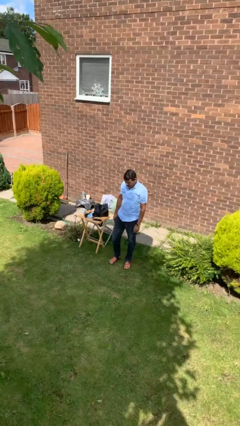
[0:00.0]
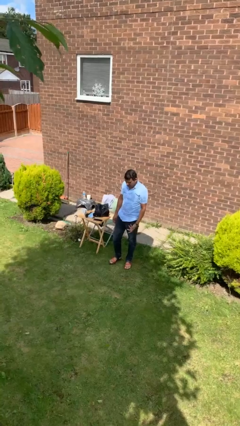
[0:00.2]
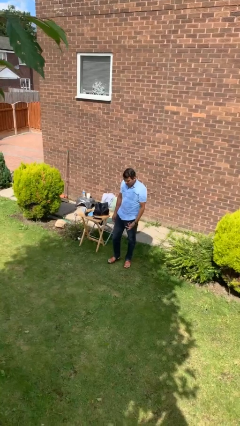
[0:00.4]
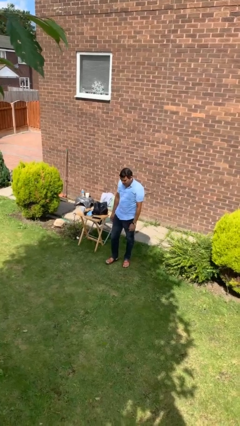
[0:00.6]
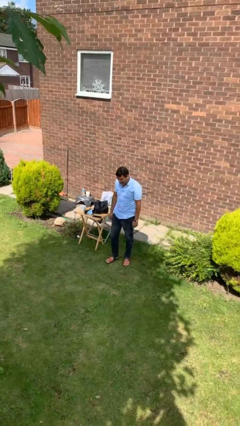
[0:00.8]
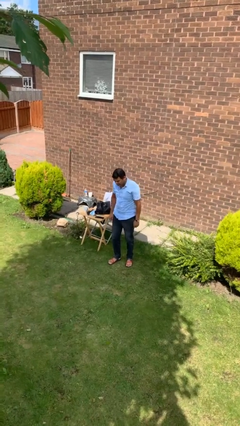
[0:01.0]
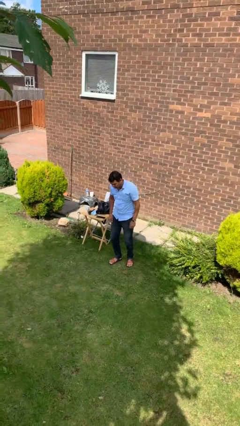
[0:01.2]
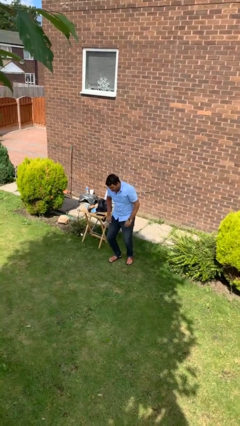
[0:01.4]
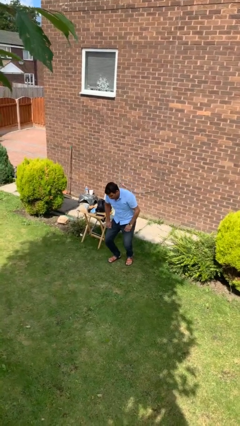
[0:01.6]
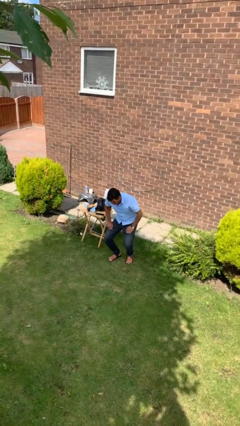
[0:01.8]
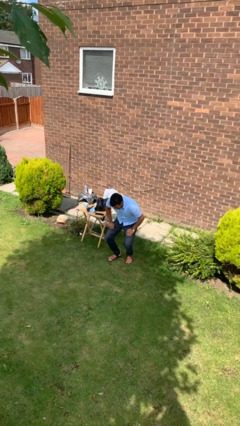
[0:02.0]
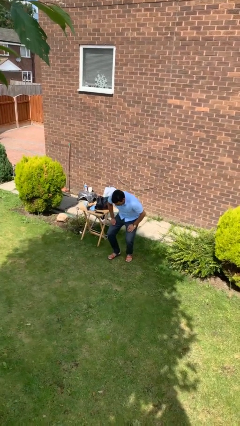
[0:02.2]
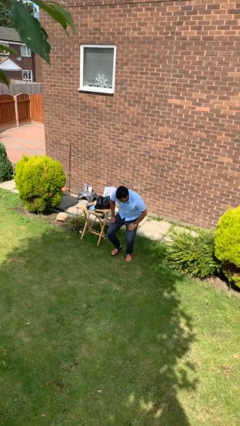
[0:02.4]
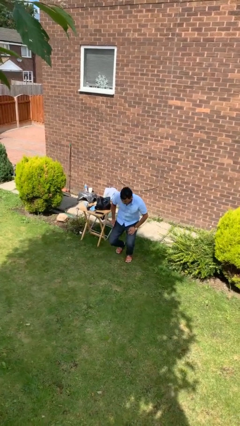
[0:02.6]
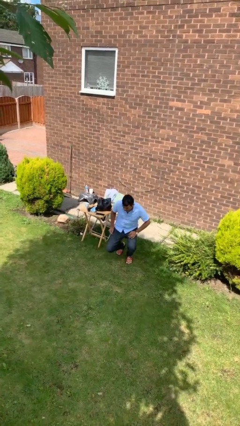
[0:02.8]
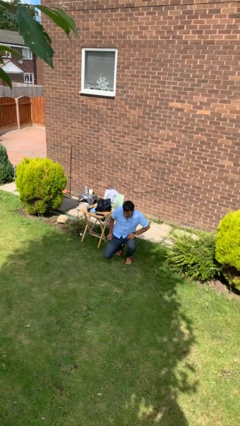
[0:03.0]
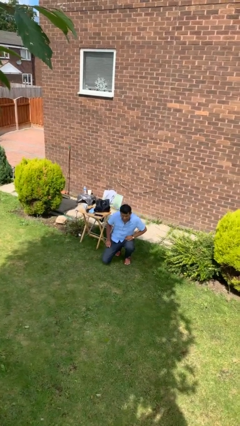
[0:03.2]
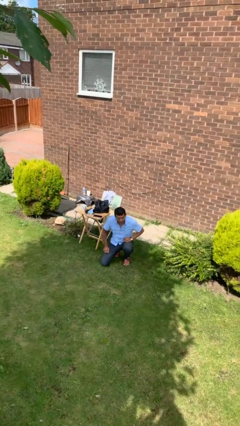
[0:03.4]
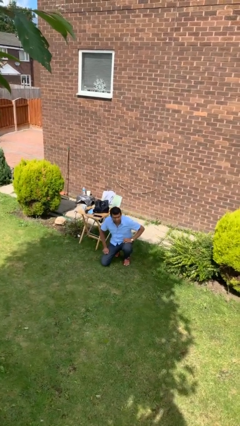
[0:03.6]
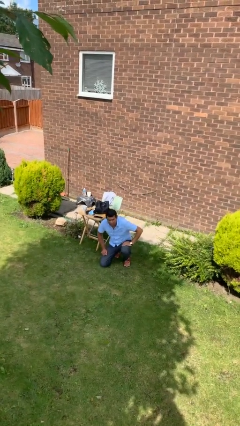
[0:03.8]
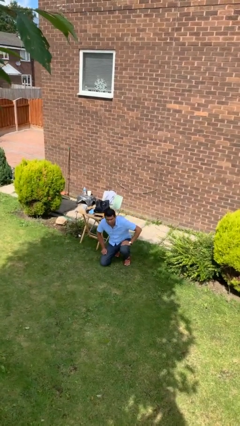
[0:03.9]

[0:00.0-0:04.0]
person kneels

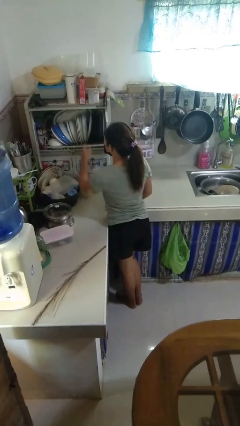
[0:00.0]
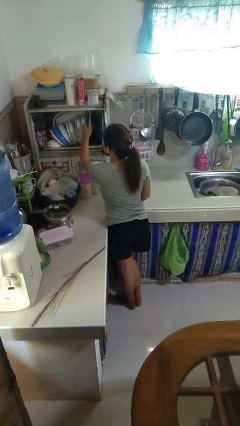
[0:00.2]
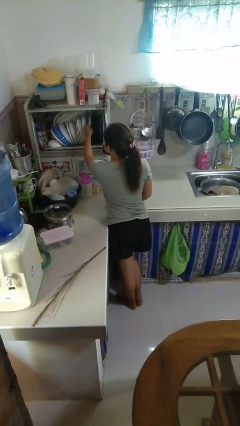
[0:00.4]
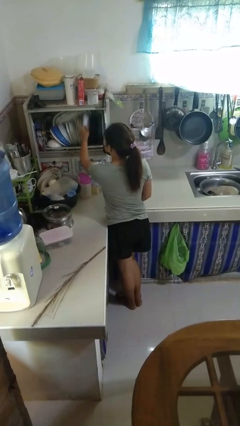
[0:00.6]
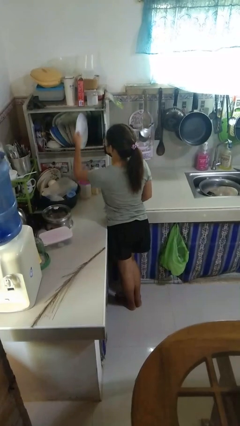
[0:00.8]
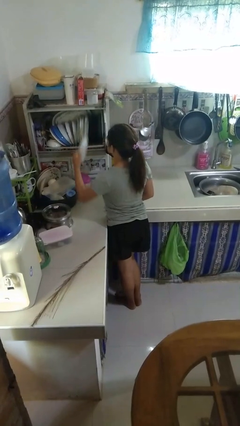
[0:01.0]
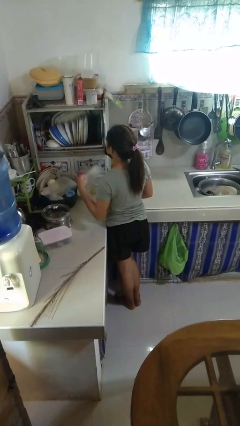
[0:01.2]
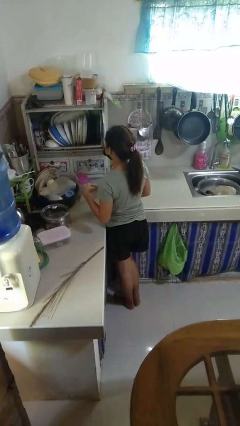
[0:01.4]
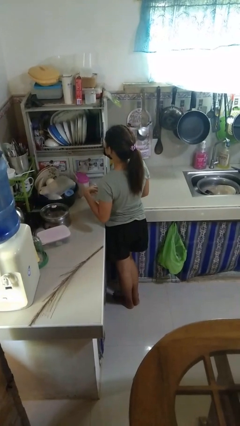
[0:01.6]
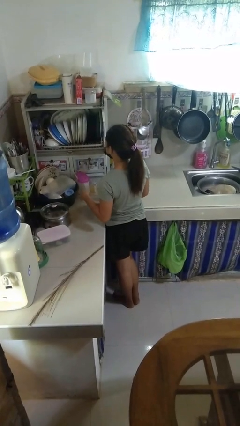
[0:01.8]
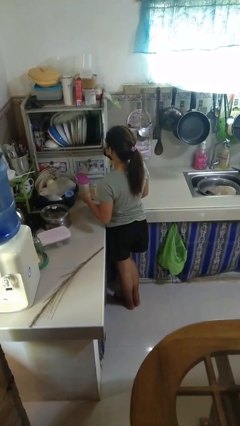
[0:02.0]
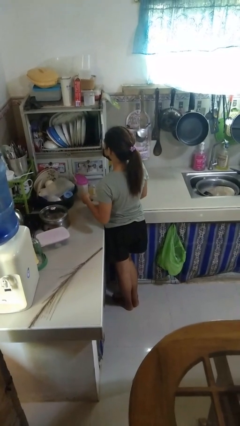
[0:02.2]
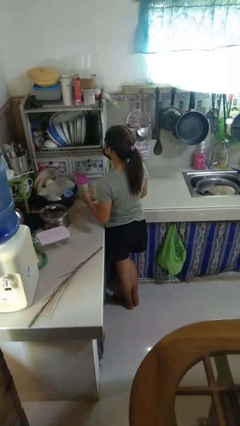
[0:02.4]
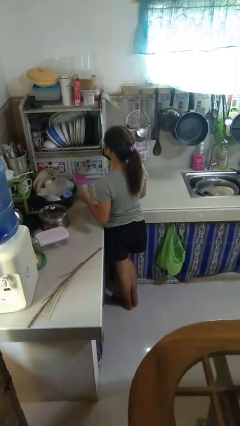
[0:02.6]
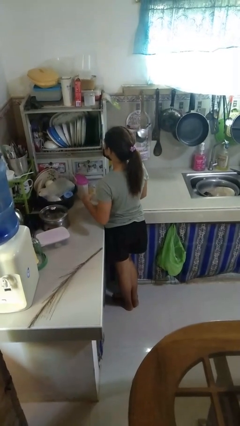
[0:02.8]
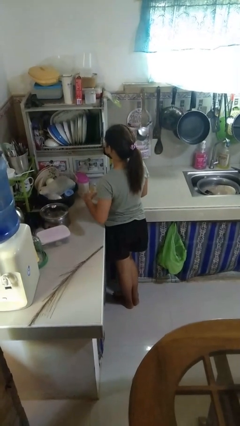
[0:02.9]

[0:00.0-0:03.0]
person takes object from kitchen drawer

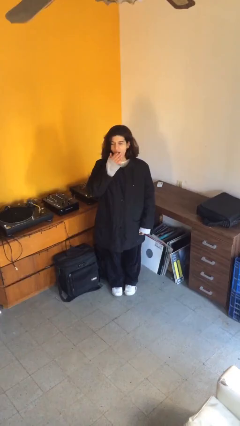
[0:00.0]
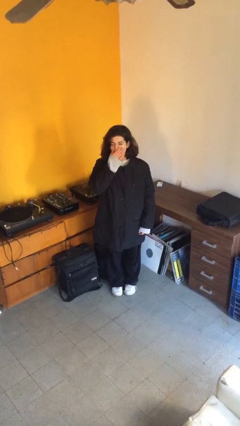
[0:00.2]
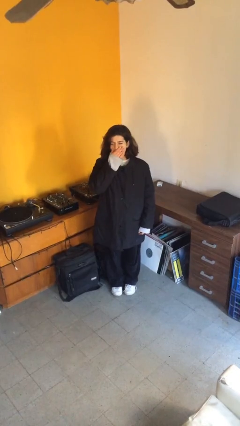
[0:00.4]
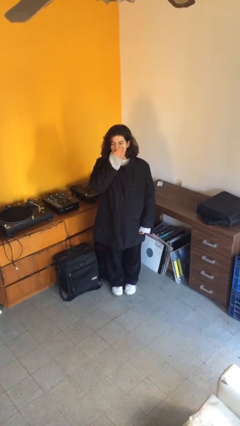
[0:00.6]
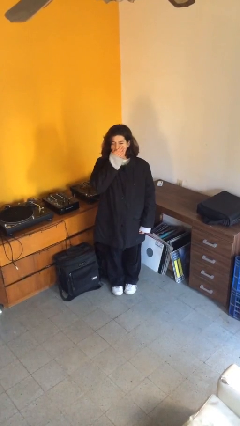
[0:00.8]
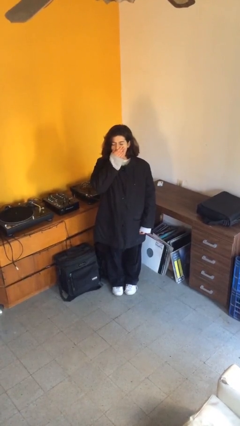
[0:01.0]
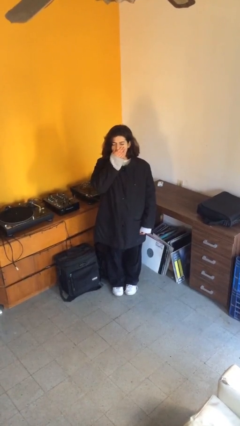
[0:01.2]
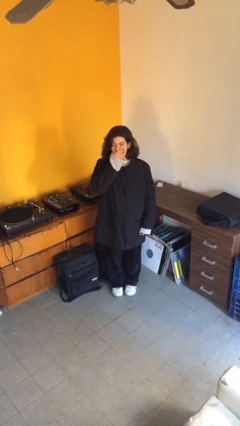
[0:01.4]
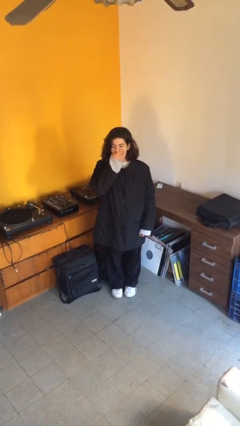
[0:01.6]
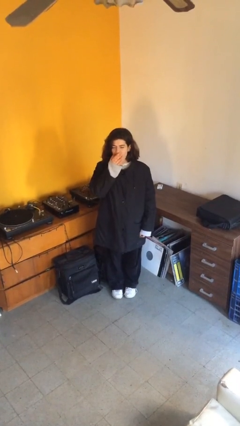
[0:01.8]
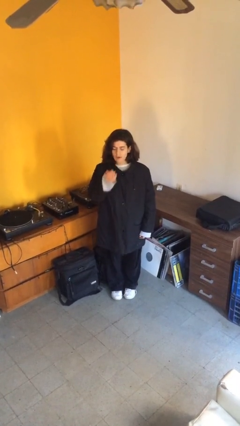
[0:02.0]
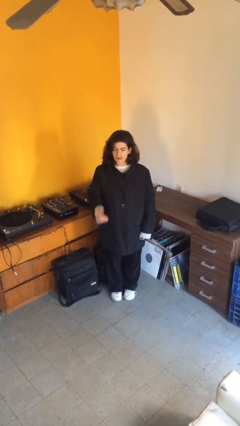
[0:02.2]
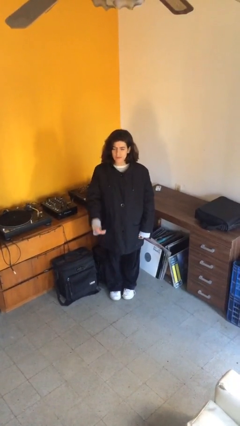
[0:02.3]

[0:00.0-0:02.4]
person yawns

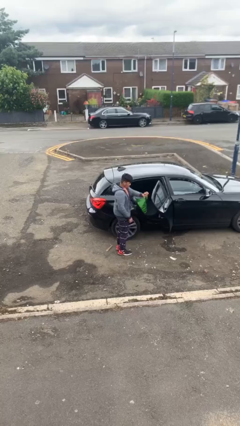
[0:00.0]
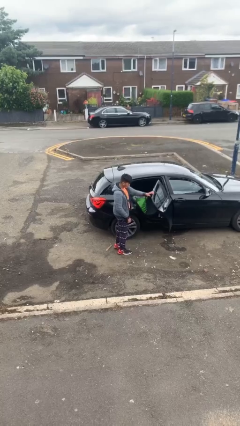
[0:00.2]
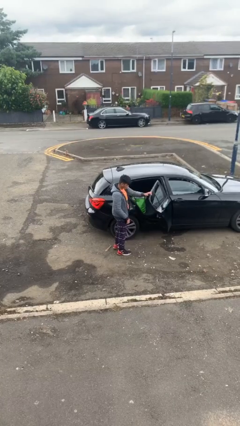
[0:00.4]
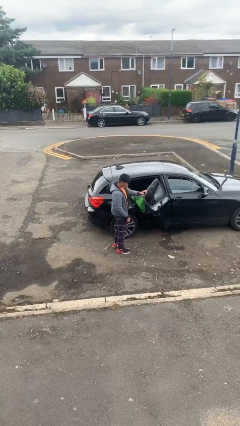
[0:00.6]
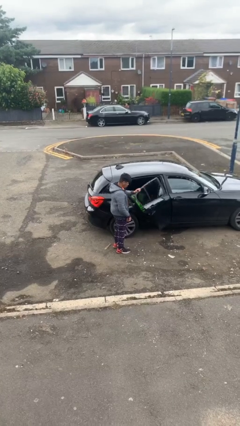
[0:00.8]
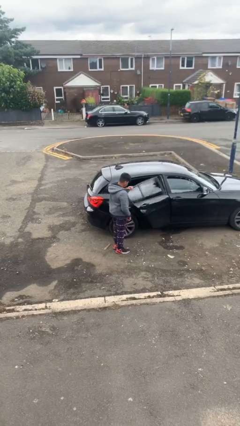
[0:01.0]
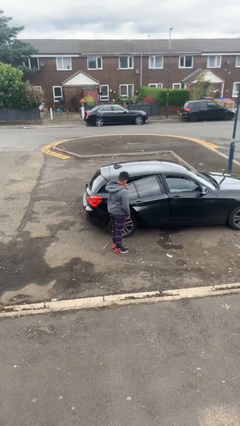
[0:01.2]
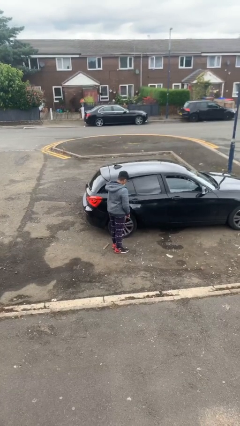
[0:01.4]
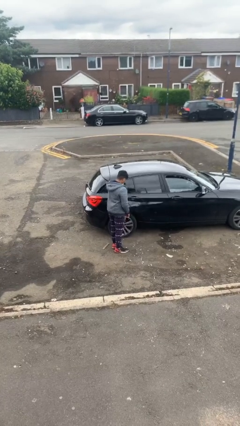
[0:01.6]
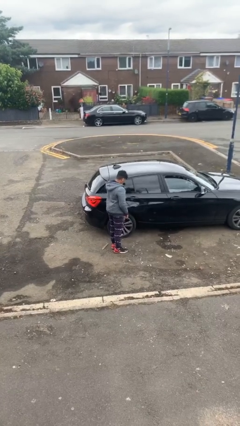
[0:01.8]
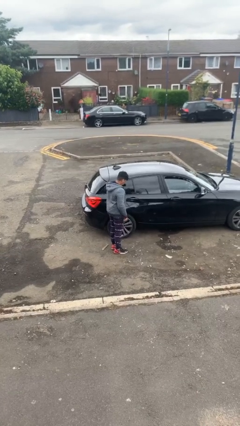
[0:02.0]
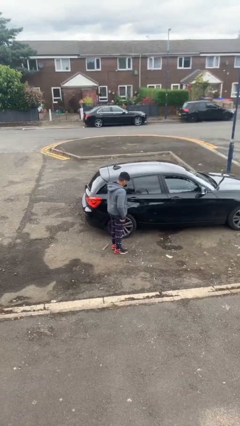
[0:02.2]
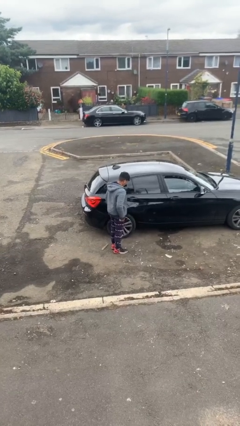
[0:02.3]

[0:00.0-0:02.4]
person closes car door

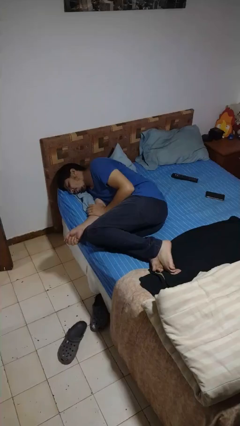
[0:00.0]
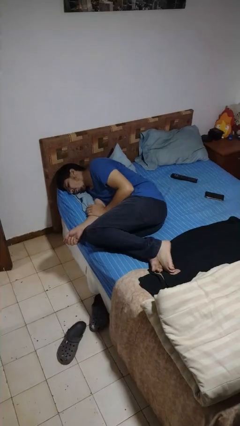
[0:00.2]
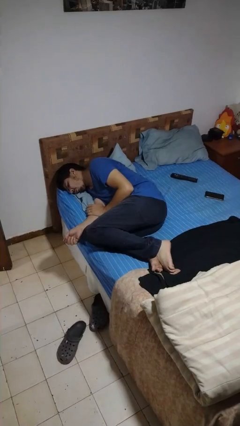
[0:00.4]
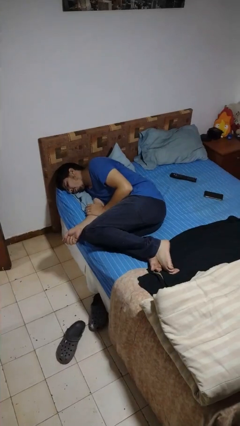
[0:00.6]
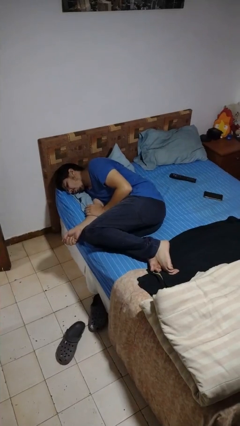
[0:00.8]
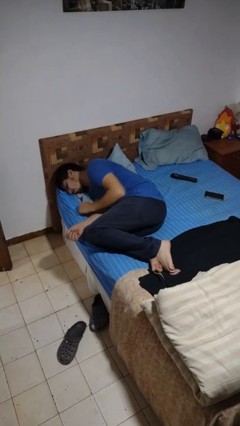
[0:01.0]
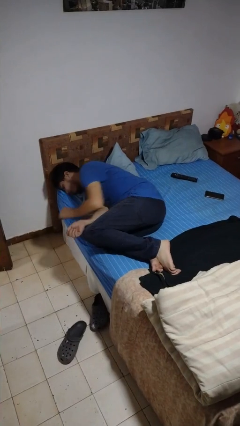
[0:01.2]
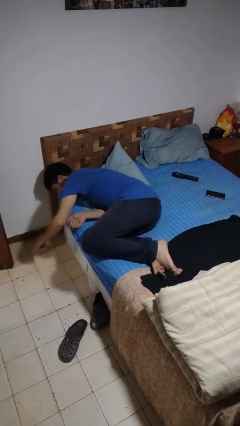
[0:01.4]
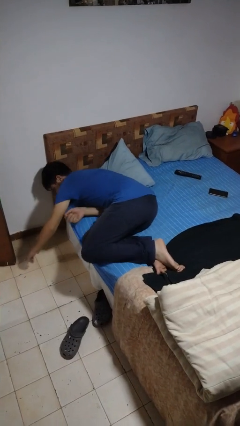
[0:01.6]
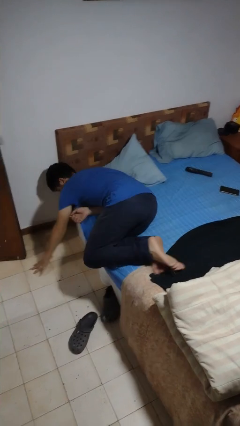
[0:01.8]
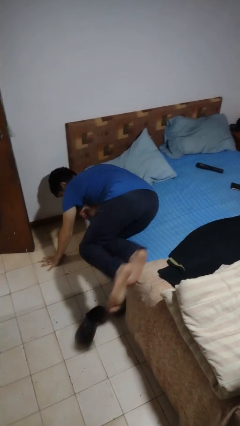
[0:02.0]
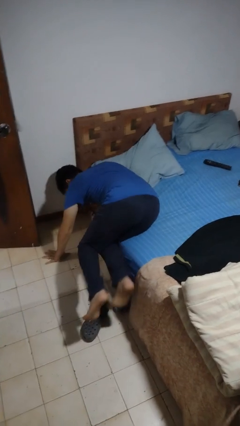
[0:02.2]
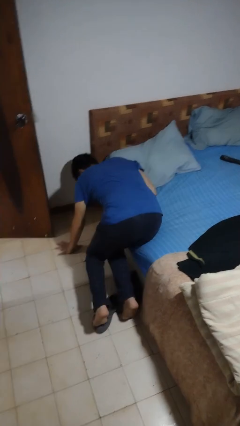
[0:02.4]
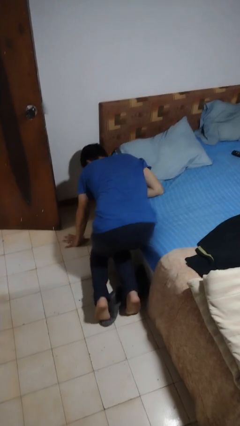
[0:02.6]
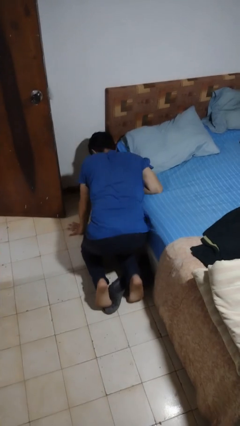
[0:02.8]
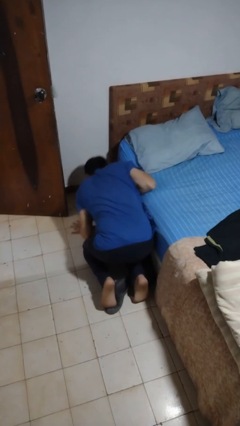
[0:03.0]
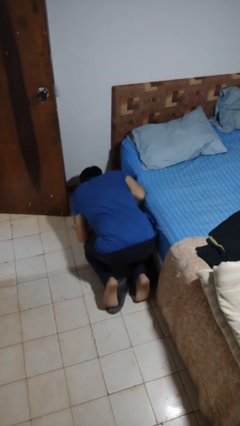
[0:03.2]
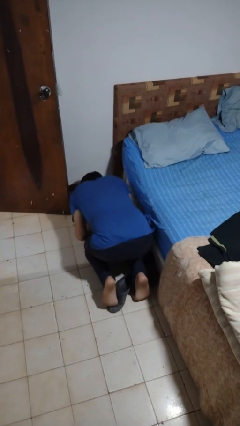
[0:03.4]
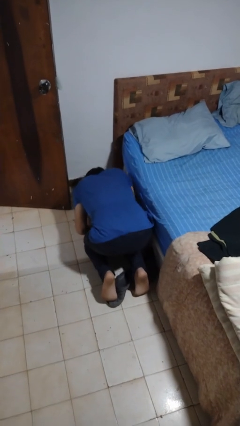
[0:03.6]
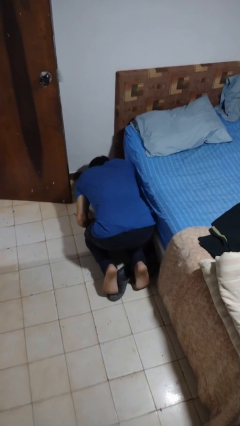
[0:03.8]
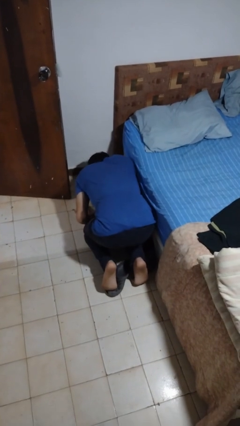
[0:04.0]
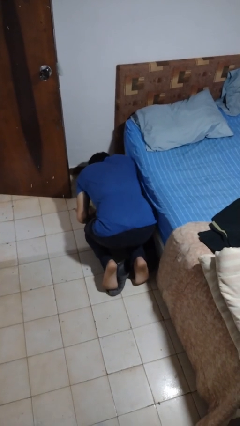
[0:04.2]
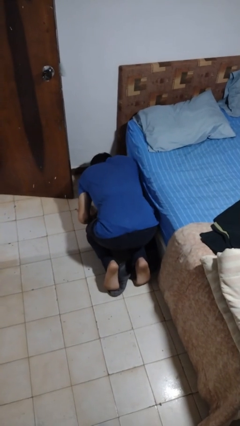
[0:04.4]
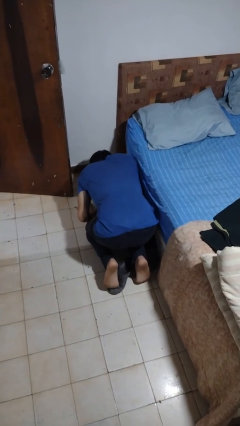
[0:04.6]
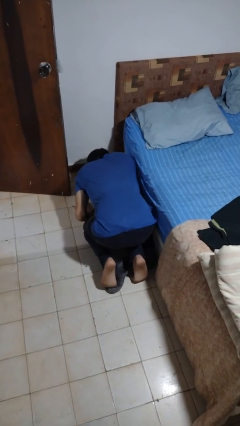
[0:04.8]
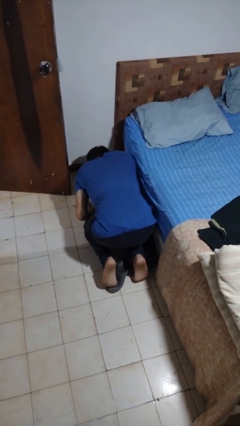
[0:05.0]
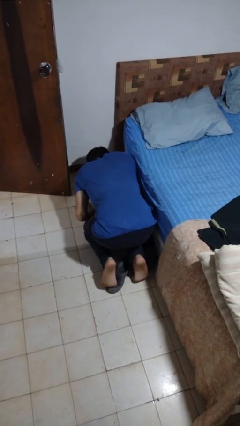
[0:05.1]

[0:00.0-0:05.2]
person falls from bed

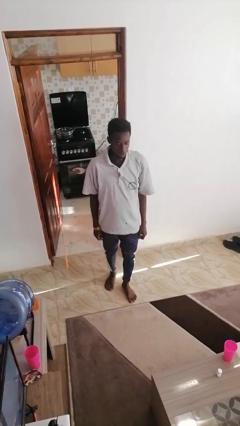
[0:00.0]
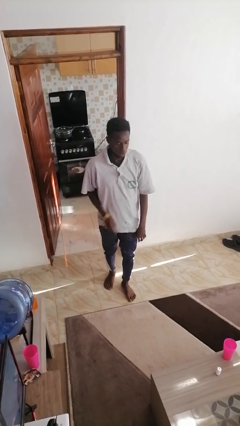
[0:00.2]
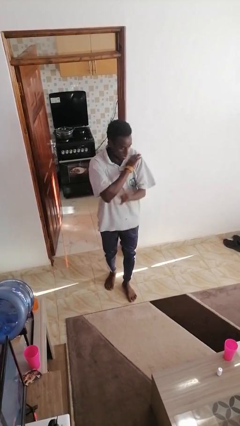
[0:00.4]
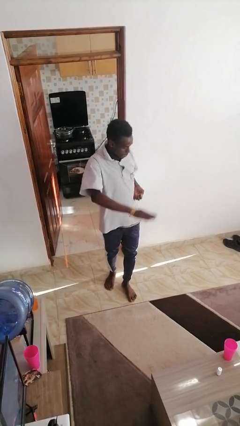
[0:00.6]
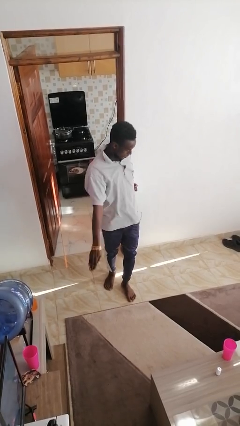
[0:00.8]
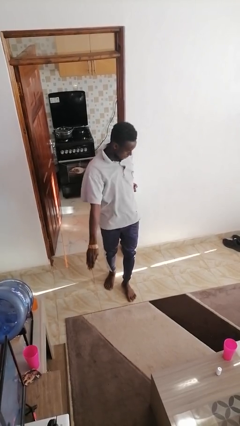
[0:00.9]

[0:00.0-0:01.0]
person karate chop
